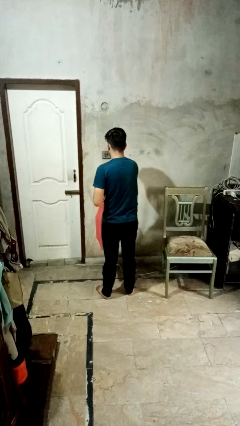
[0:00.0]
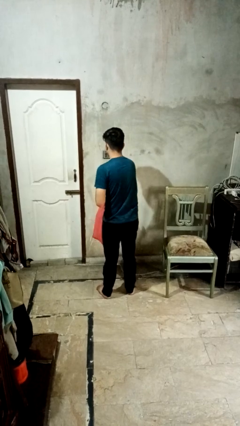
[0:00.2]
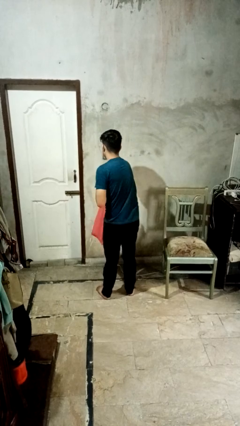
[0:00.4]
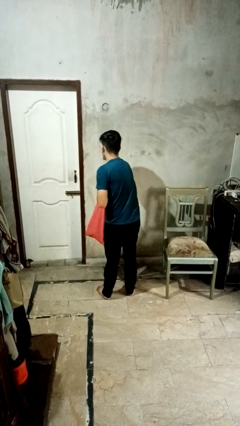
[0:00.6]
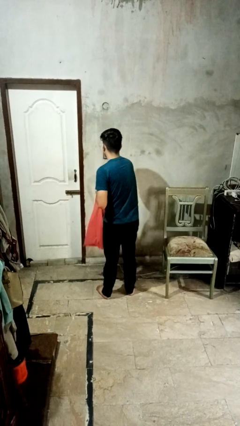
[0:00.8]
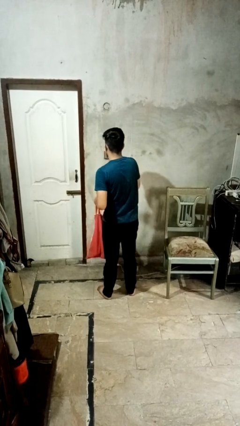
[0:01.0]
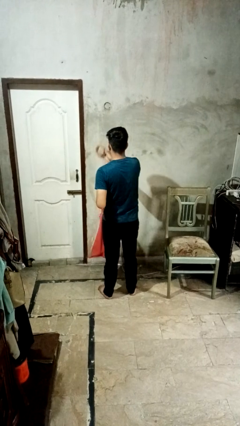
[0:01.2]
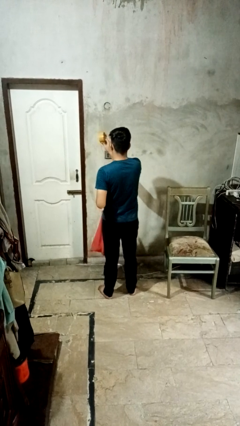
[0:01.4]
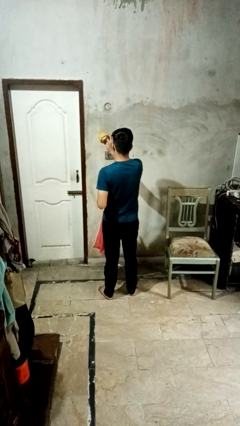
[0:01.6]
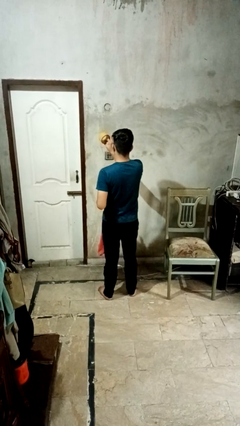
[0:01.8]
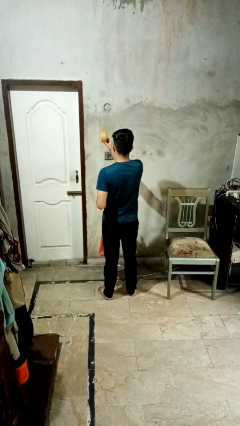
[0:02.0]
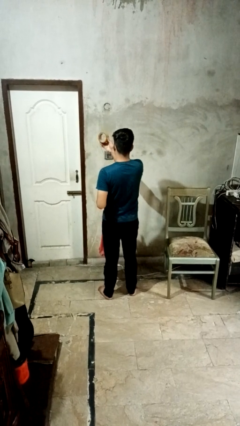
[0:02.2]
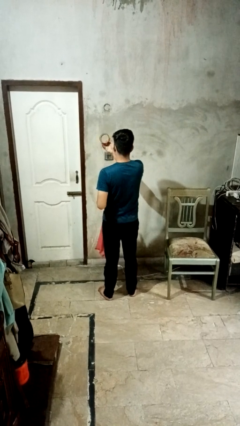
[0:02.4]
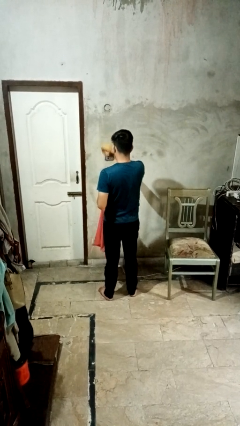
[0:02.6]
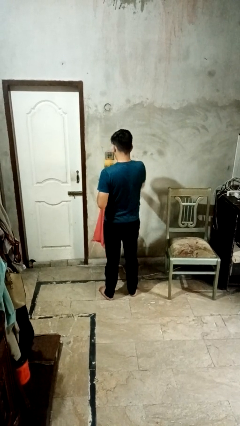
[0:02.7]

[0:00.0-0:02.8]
person takes object from bag

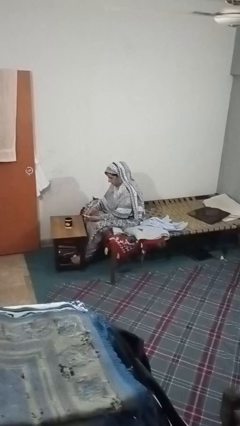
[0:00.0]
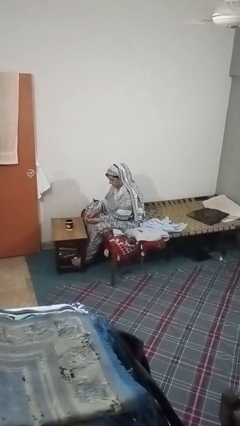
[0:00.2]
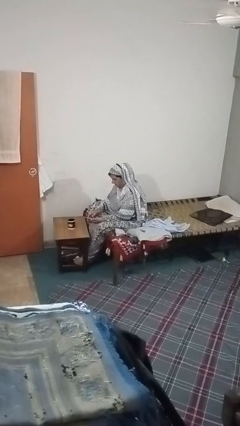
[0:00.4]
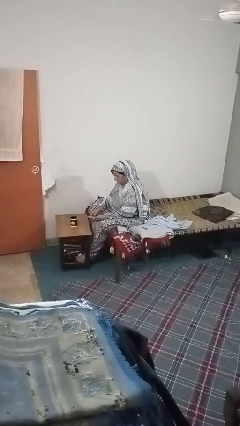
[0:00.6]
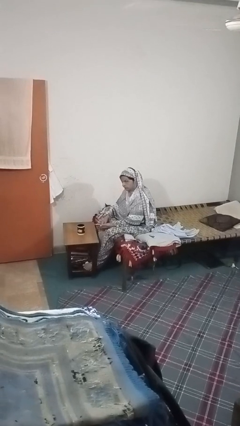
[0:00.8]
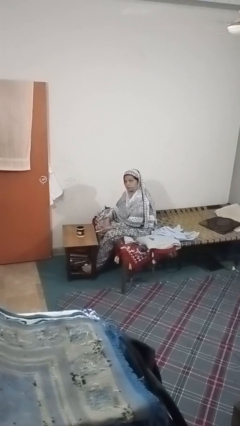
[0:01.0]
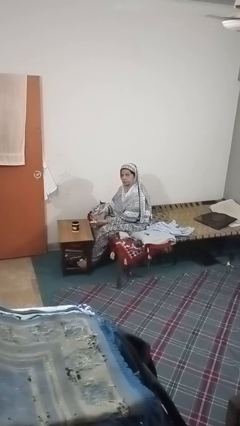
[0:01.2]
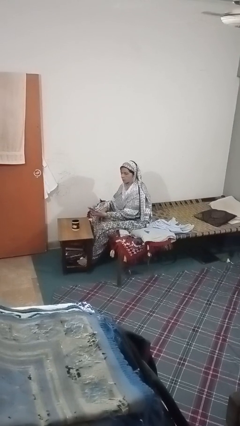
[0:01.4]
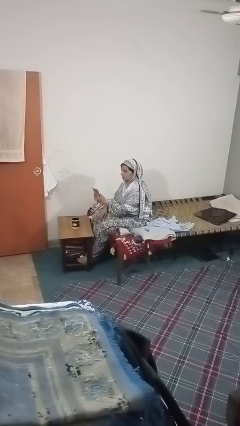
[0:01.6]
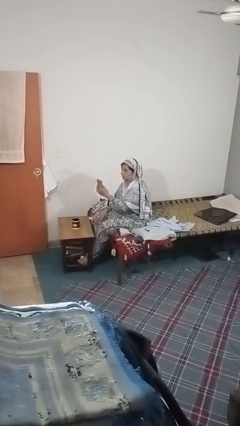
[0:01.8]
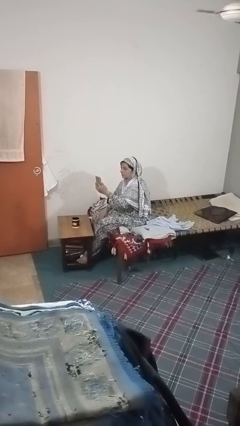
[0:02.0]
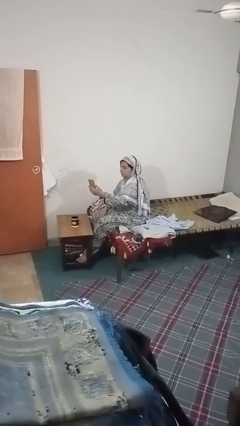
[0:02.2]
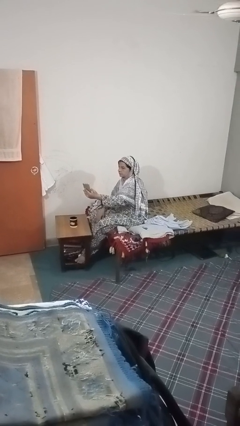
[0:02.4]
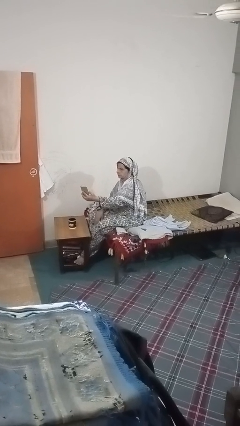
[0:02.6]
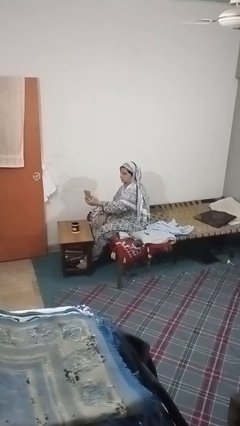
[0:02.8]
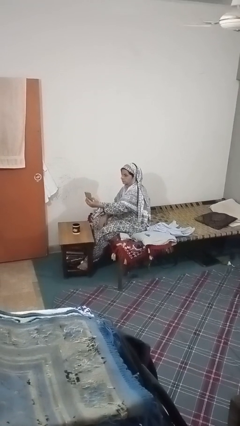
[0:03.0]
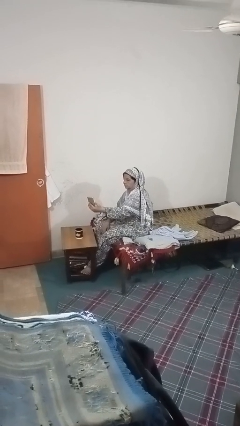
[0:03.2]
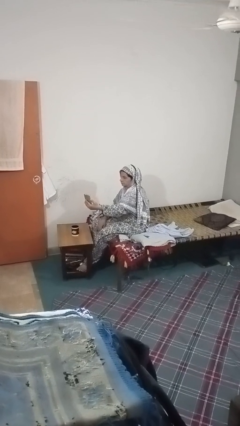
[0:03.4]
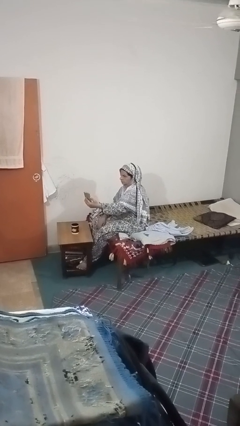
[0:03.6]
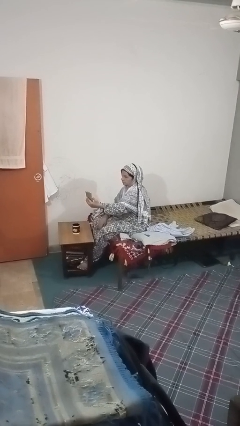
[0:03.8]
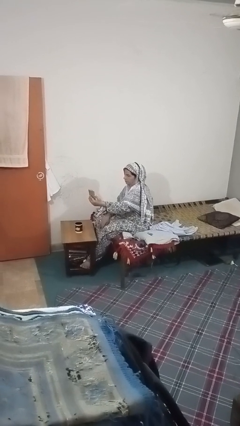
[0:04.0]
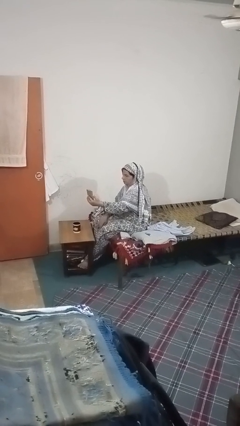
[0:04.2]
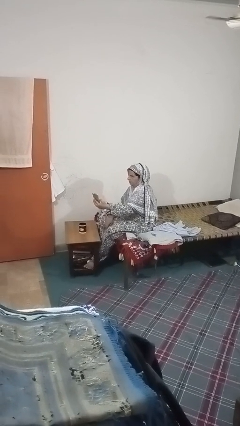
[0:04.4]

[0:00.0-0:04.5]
person takes selfie

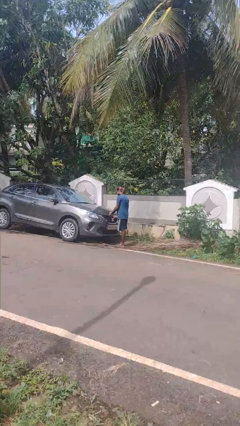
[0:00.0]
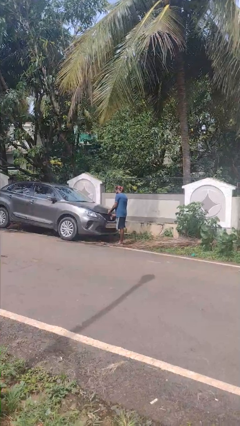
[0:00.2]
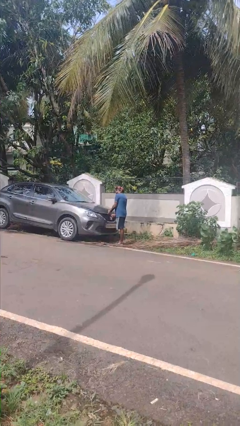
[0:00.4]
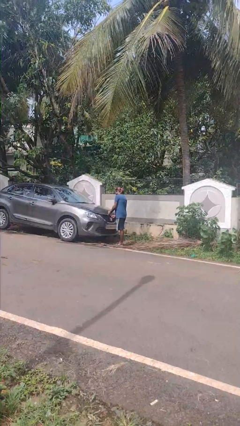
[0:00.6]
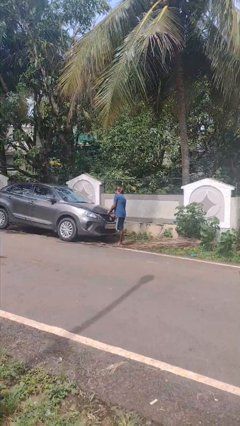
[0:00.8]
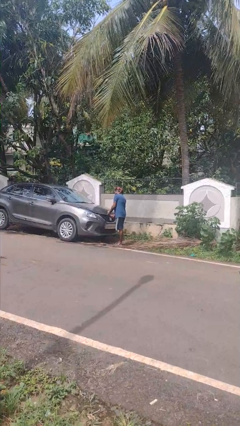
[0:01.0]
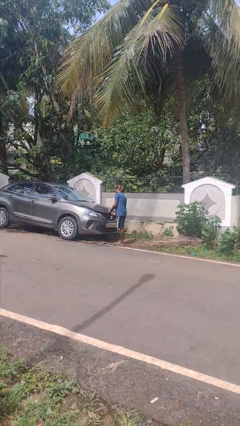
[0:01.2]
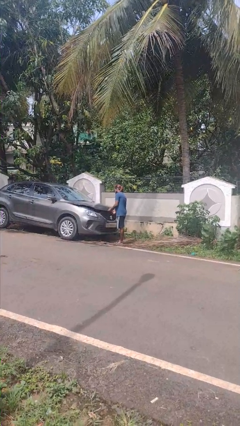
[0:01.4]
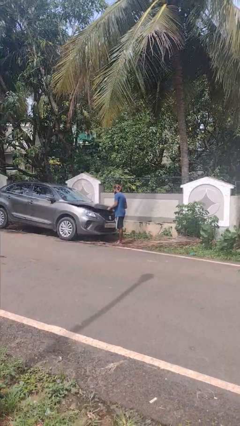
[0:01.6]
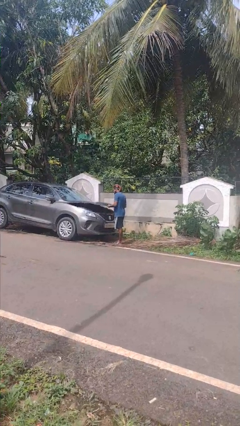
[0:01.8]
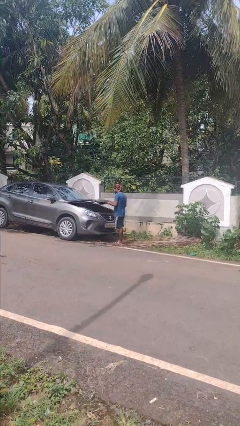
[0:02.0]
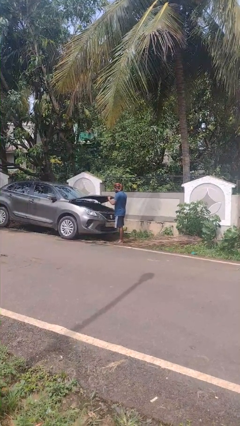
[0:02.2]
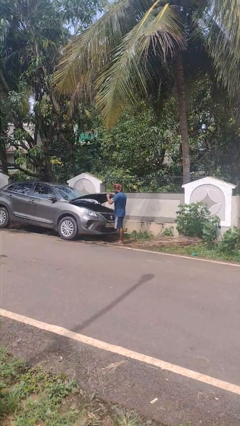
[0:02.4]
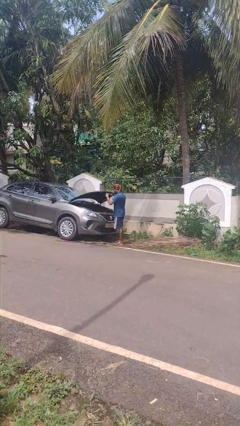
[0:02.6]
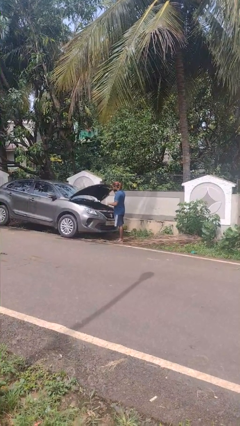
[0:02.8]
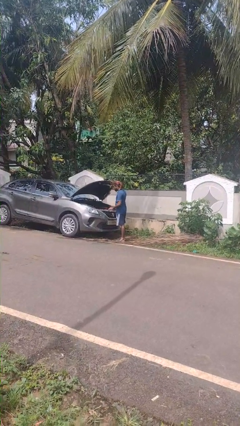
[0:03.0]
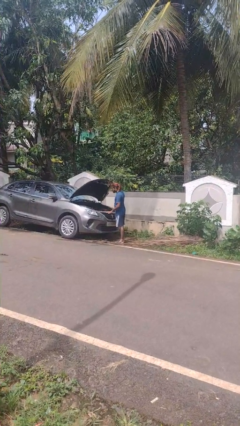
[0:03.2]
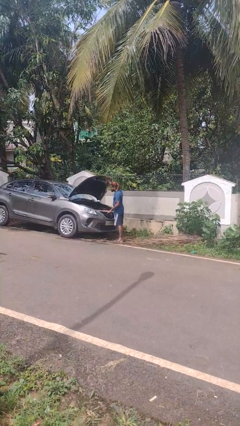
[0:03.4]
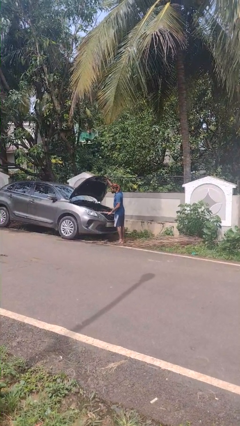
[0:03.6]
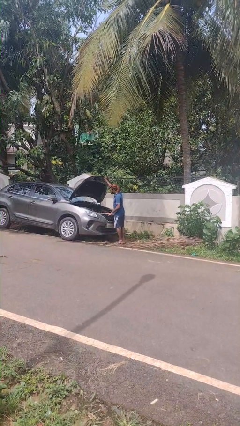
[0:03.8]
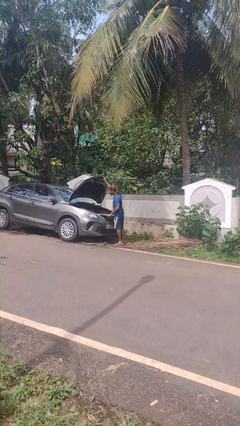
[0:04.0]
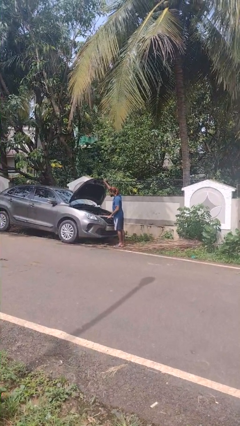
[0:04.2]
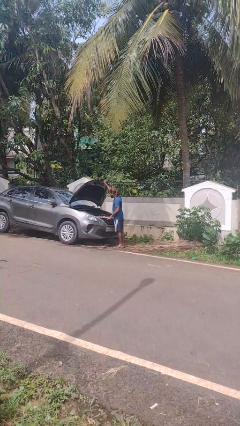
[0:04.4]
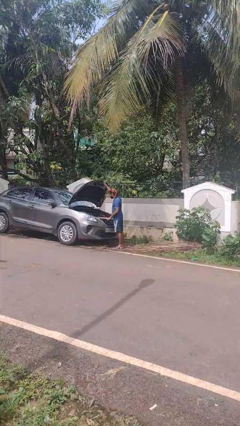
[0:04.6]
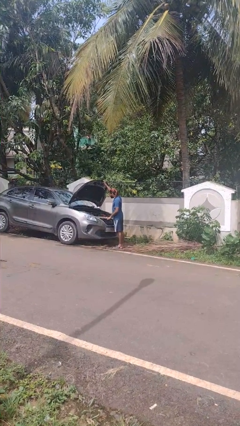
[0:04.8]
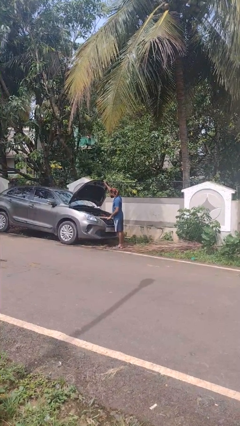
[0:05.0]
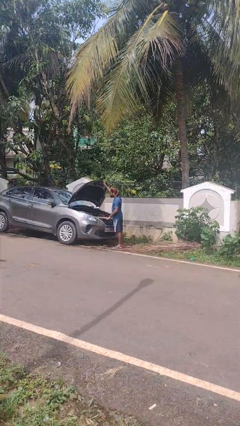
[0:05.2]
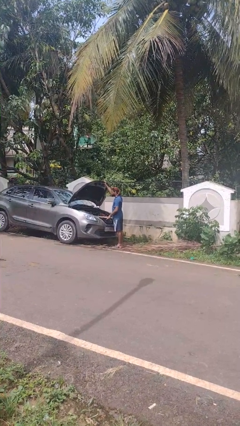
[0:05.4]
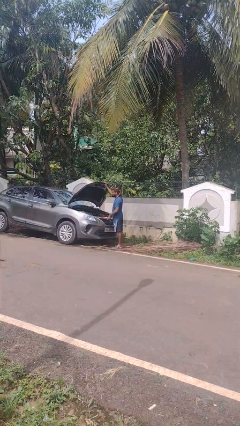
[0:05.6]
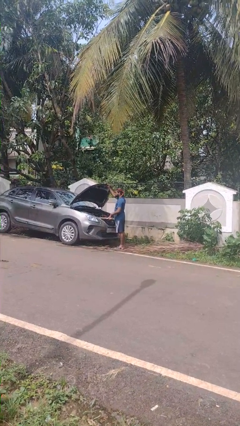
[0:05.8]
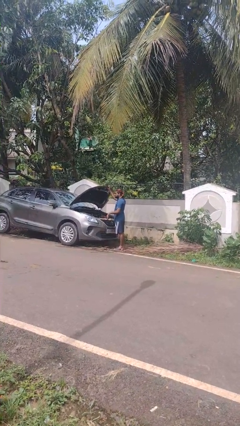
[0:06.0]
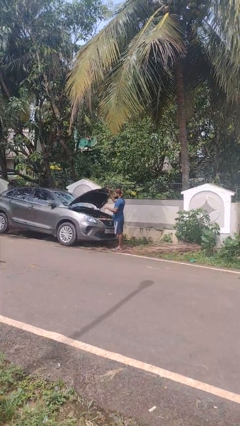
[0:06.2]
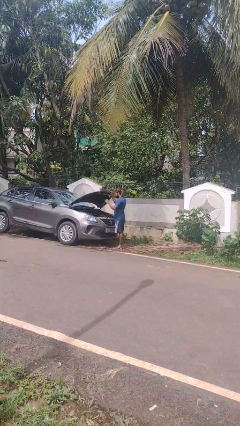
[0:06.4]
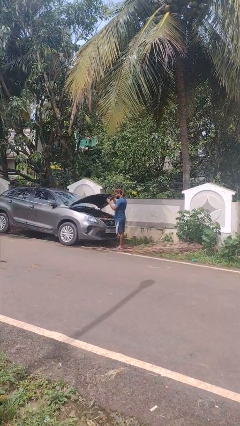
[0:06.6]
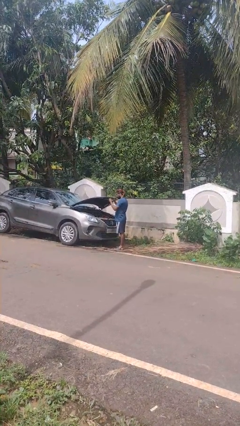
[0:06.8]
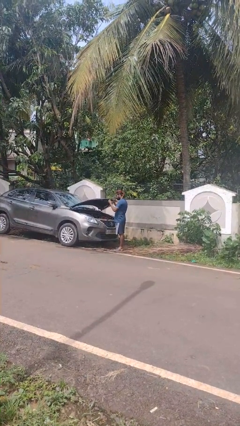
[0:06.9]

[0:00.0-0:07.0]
person opens car hood

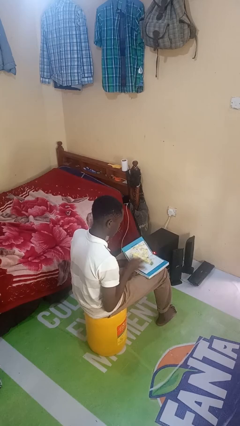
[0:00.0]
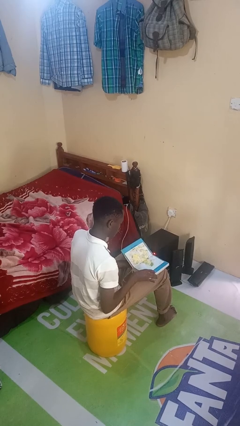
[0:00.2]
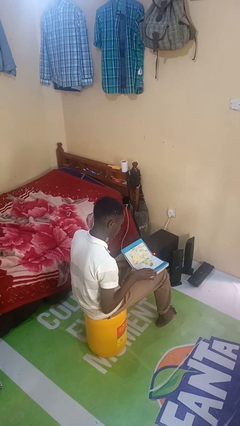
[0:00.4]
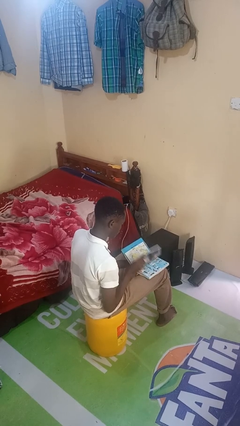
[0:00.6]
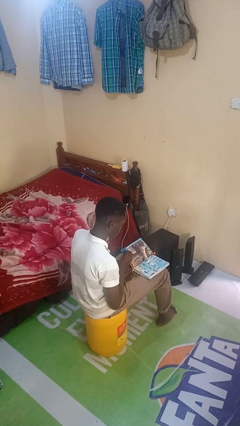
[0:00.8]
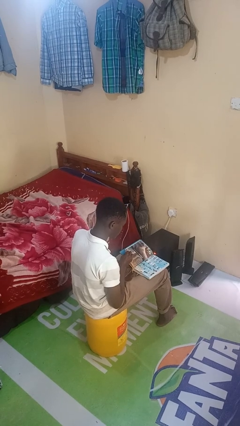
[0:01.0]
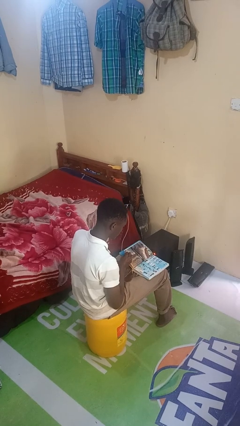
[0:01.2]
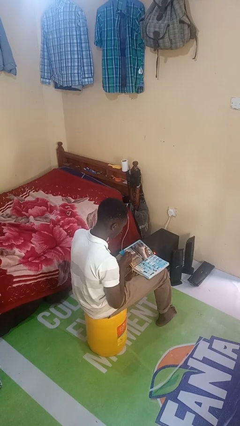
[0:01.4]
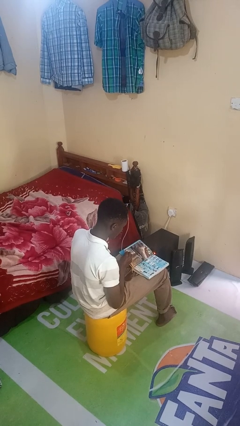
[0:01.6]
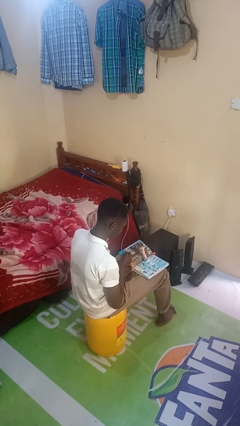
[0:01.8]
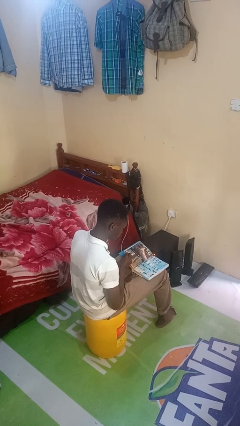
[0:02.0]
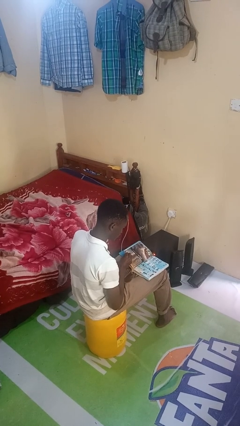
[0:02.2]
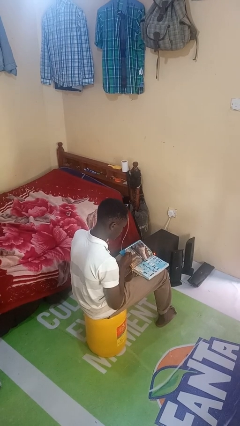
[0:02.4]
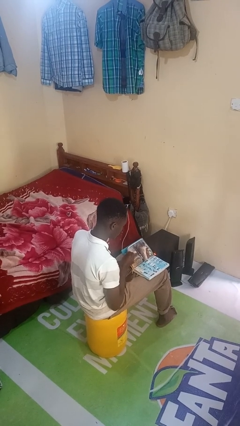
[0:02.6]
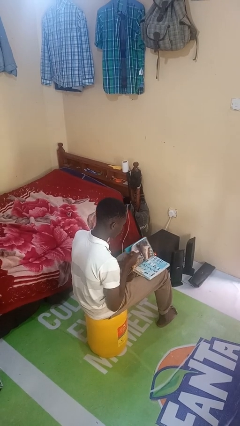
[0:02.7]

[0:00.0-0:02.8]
person reads book

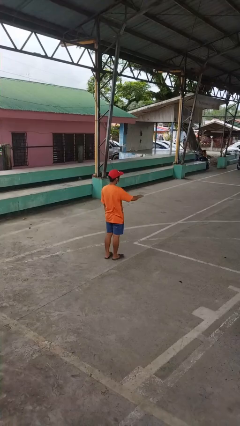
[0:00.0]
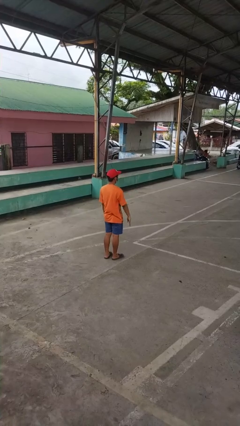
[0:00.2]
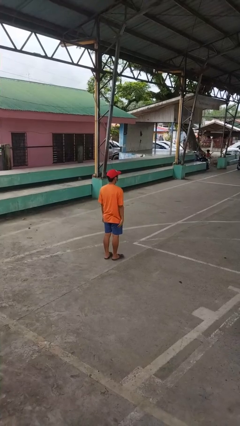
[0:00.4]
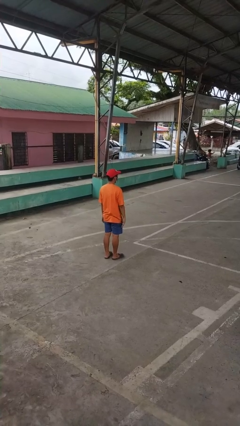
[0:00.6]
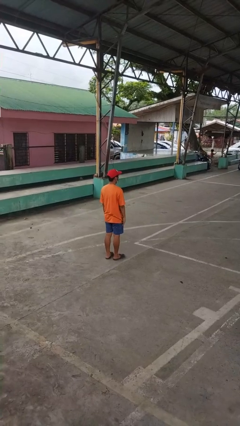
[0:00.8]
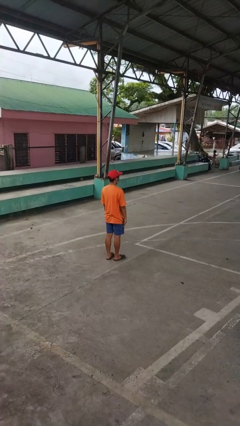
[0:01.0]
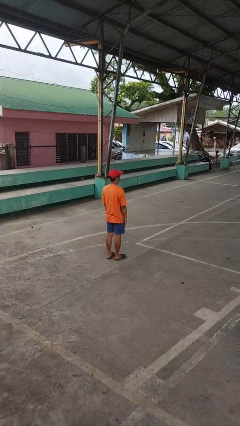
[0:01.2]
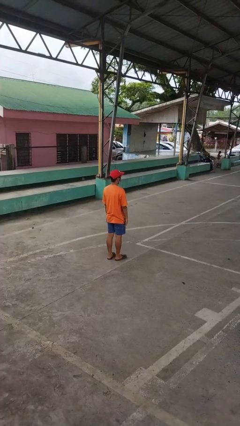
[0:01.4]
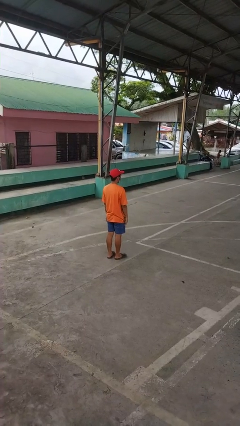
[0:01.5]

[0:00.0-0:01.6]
person gestures lower hand
